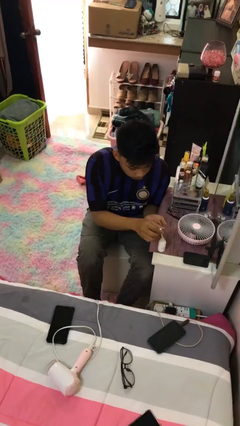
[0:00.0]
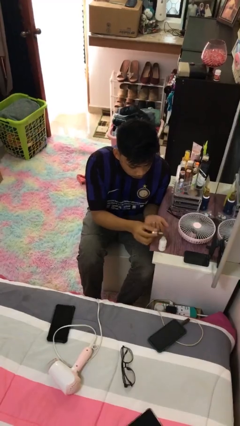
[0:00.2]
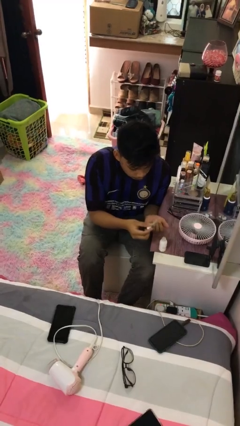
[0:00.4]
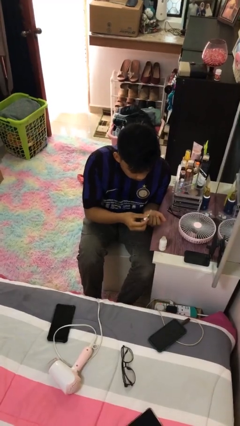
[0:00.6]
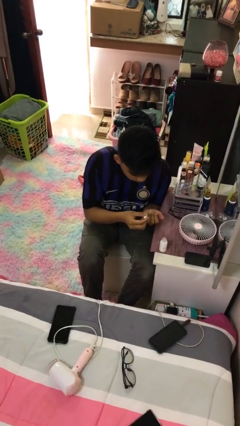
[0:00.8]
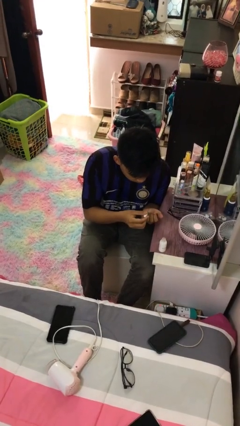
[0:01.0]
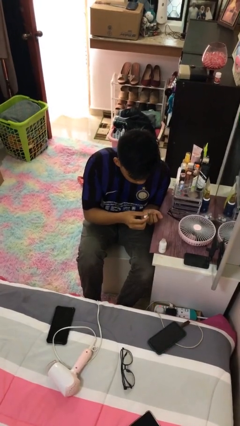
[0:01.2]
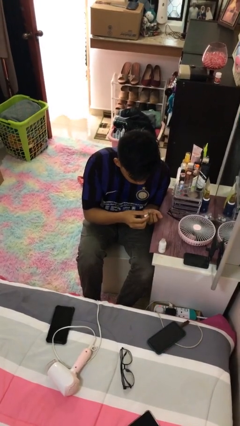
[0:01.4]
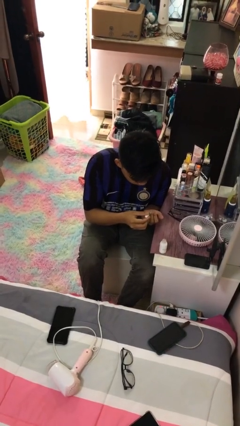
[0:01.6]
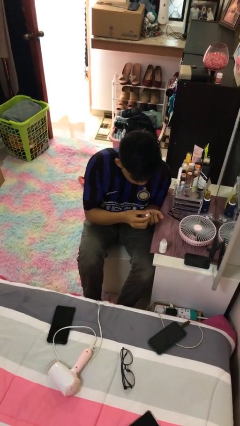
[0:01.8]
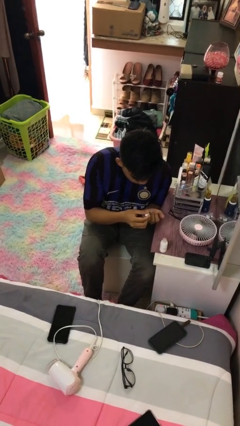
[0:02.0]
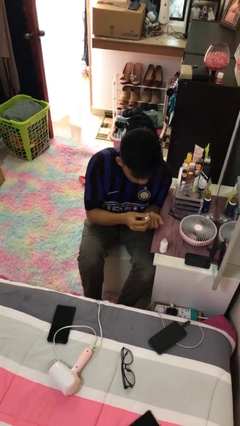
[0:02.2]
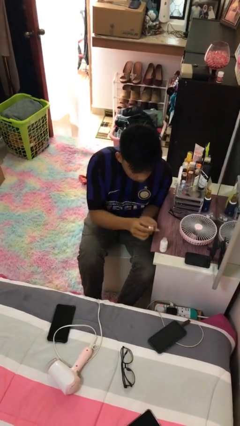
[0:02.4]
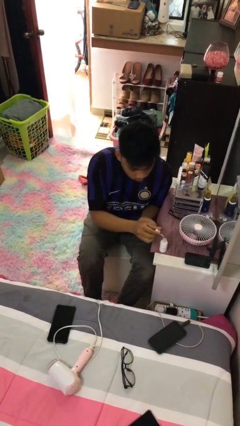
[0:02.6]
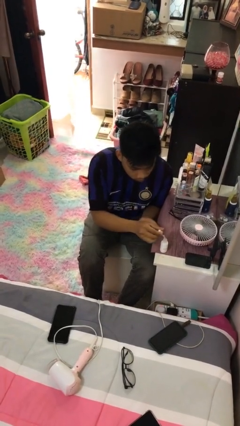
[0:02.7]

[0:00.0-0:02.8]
person paints fingernails

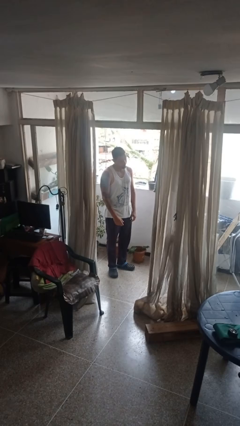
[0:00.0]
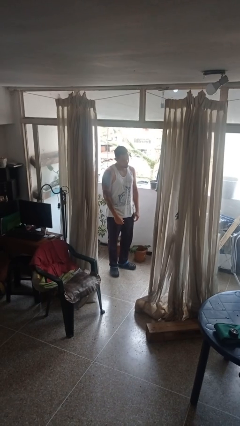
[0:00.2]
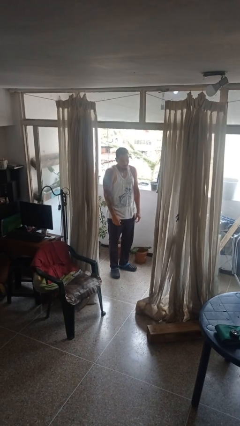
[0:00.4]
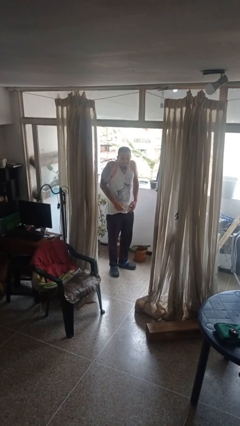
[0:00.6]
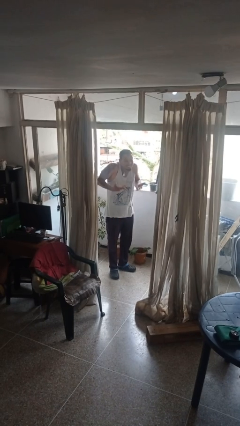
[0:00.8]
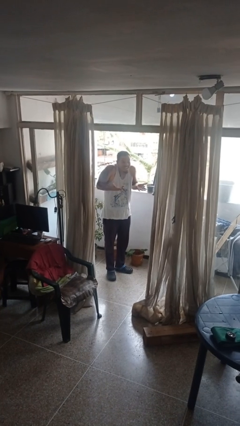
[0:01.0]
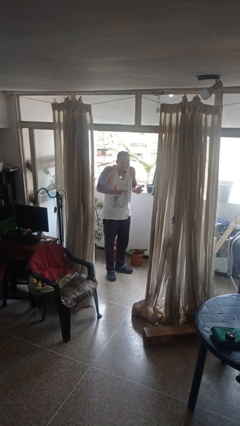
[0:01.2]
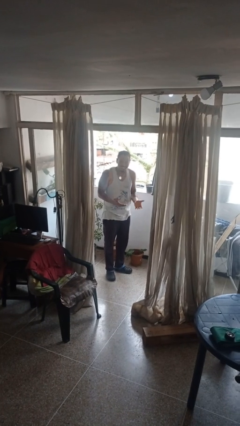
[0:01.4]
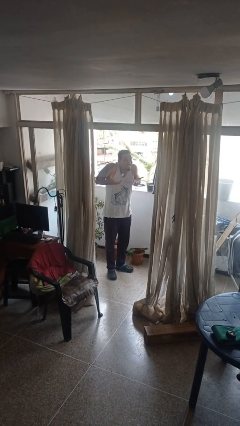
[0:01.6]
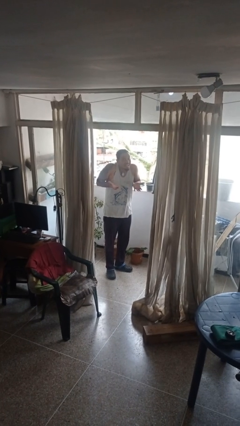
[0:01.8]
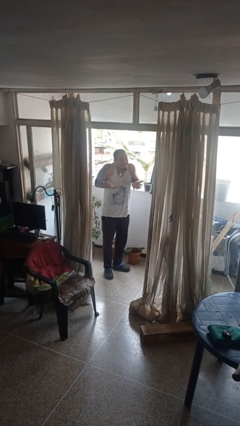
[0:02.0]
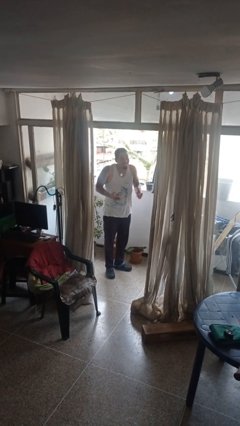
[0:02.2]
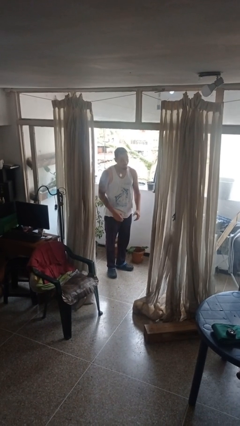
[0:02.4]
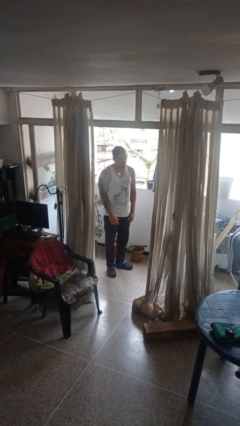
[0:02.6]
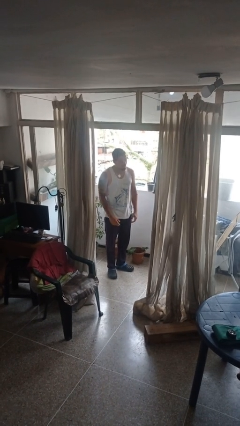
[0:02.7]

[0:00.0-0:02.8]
person shrugs

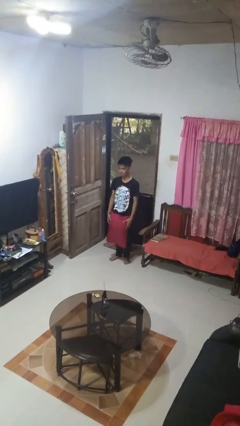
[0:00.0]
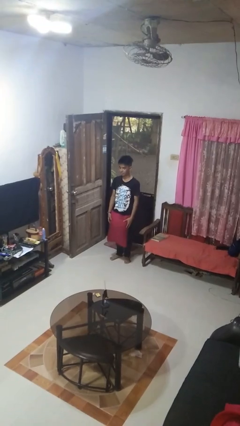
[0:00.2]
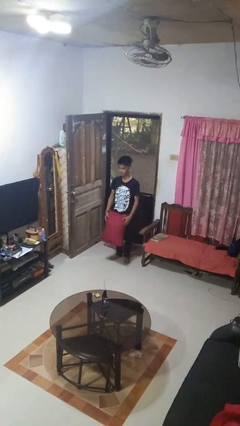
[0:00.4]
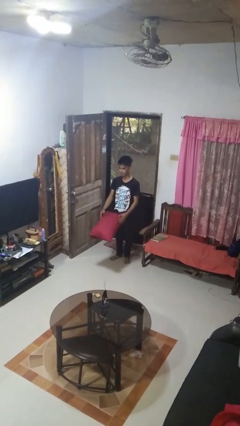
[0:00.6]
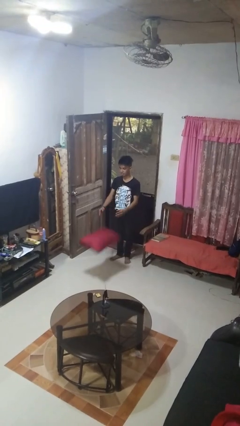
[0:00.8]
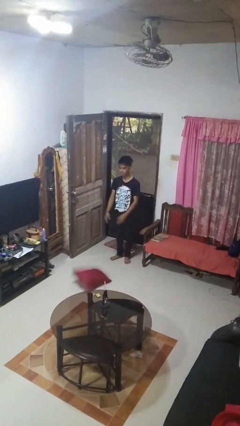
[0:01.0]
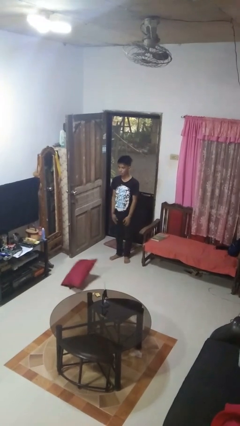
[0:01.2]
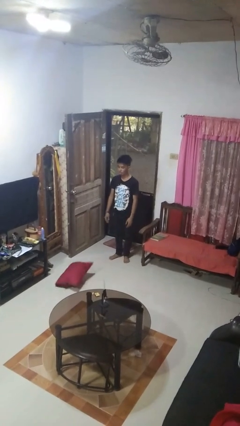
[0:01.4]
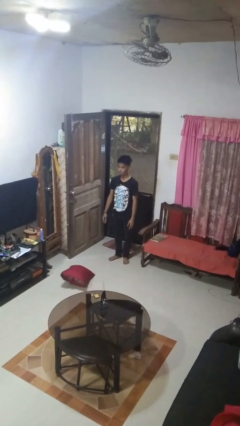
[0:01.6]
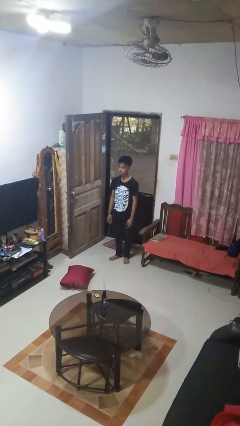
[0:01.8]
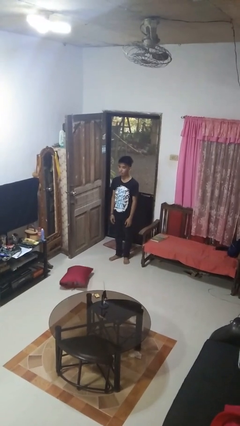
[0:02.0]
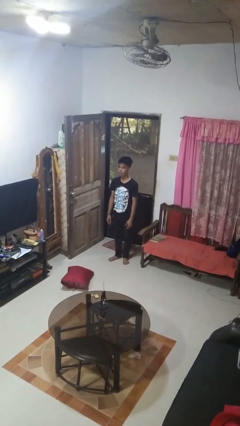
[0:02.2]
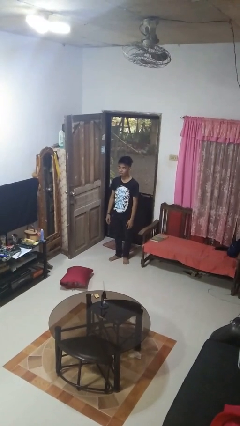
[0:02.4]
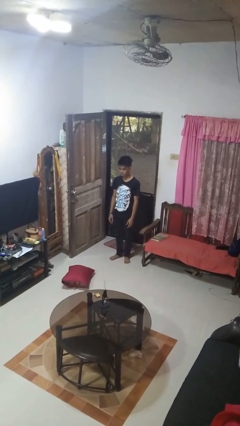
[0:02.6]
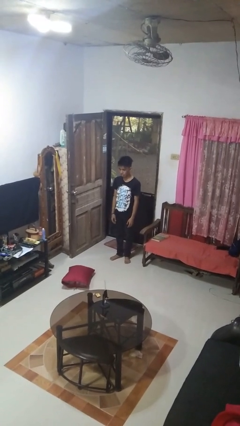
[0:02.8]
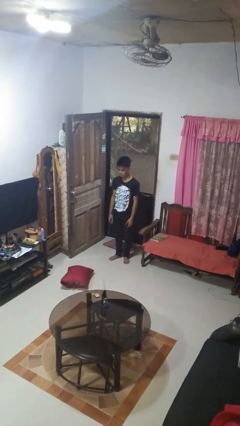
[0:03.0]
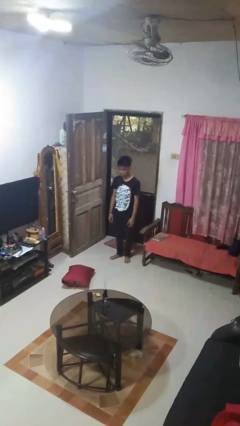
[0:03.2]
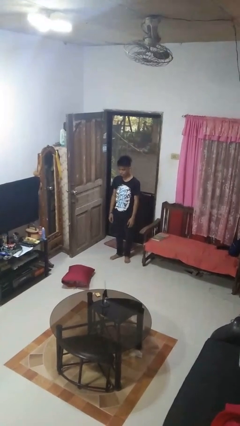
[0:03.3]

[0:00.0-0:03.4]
person throws object to ground

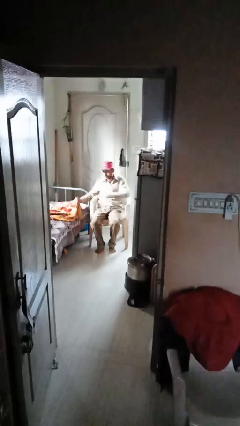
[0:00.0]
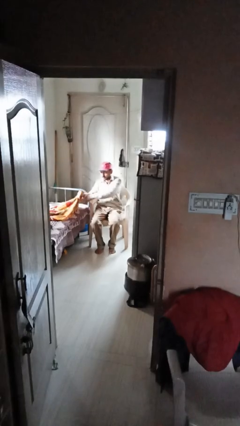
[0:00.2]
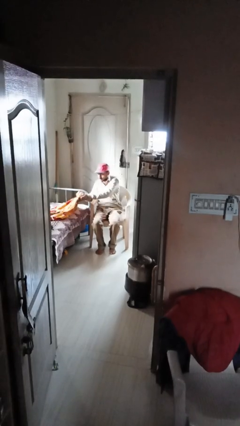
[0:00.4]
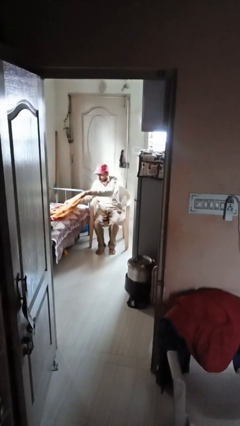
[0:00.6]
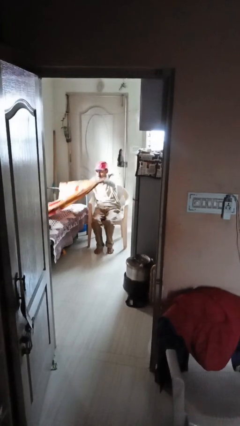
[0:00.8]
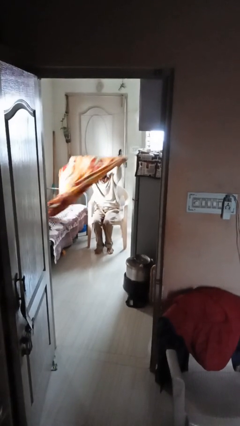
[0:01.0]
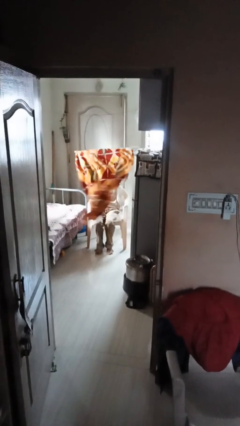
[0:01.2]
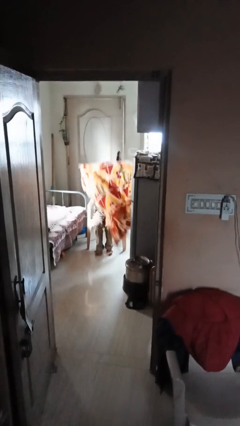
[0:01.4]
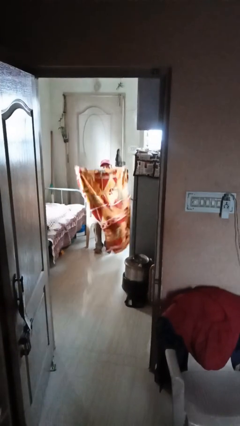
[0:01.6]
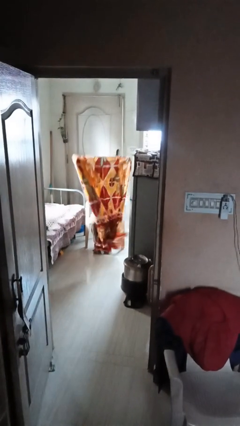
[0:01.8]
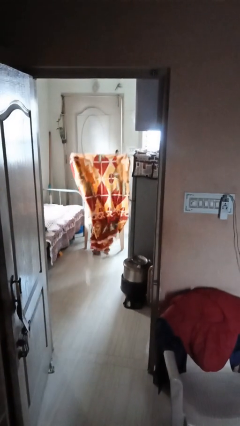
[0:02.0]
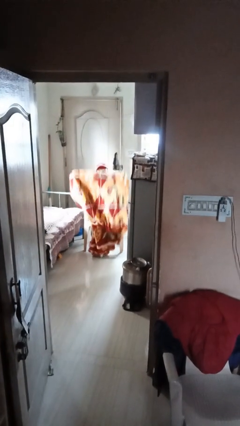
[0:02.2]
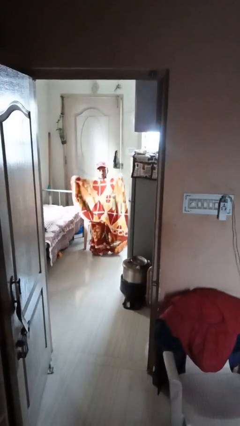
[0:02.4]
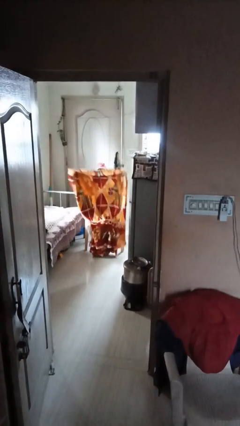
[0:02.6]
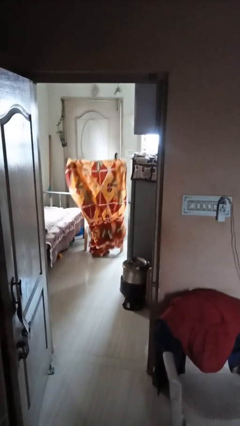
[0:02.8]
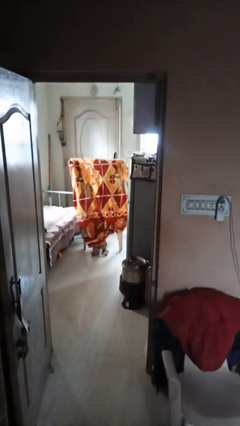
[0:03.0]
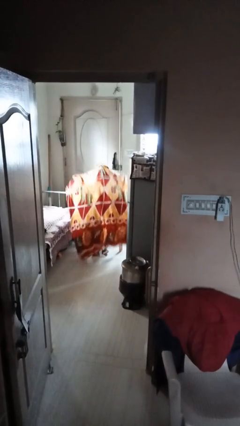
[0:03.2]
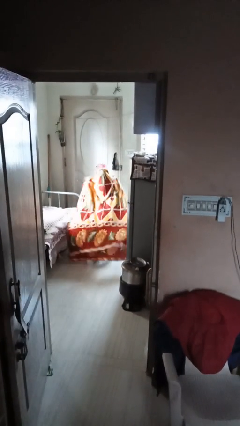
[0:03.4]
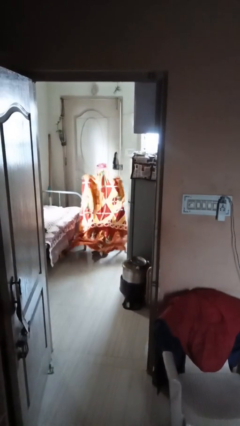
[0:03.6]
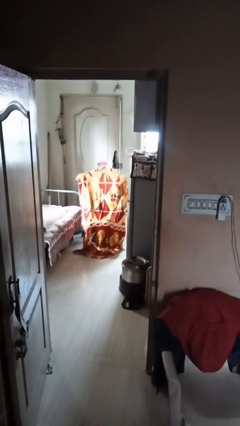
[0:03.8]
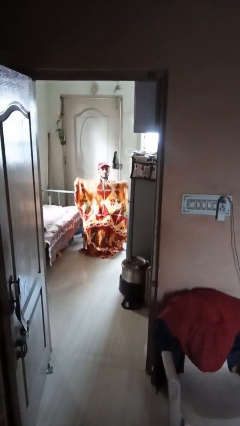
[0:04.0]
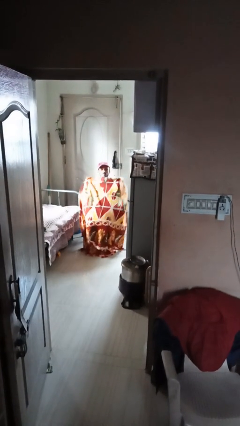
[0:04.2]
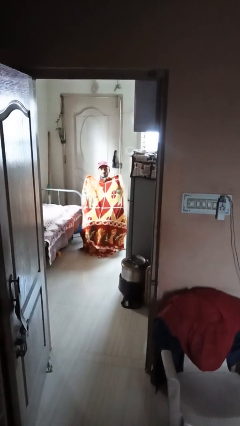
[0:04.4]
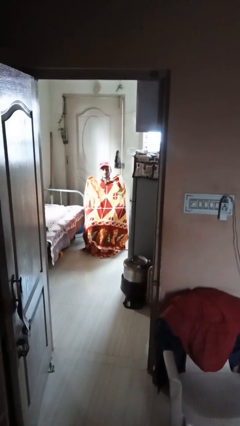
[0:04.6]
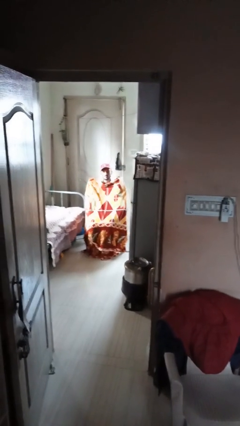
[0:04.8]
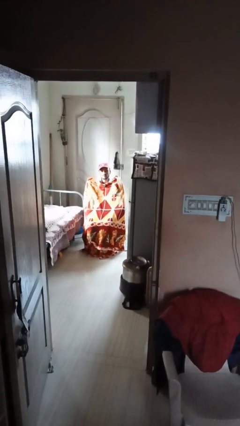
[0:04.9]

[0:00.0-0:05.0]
person covers with blanket

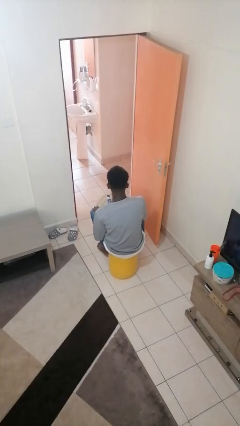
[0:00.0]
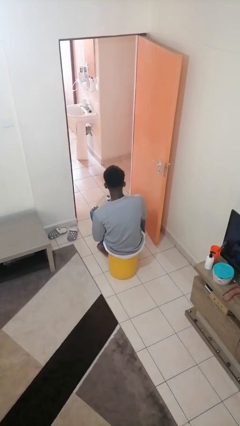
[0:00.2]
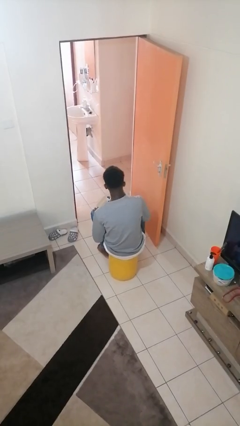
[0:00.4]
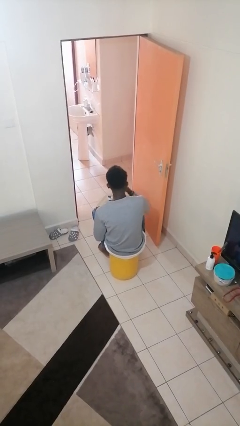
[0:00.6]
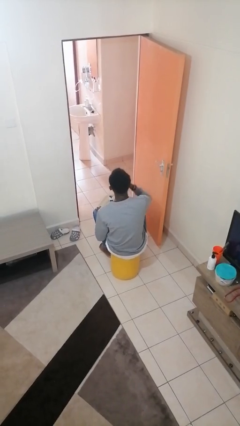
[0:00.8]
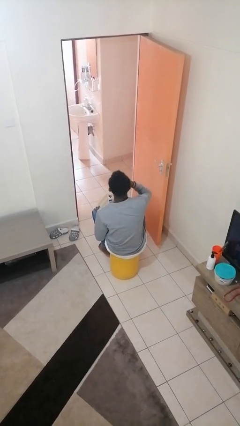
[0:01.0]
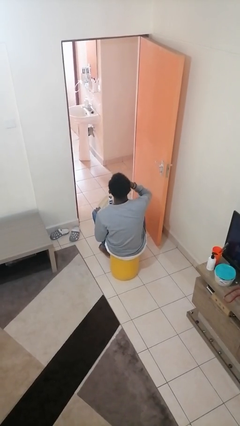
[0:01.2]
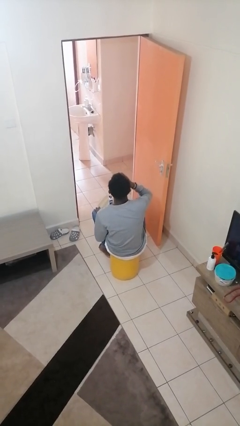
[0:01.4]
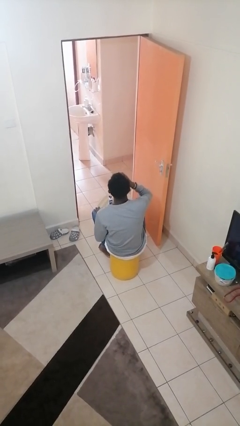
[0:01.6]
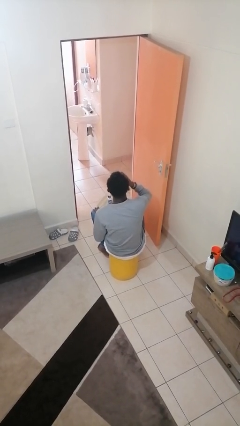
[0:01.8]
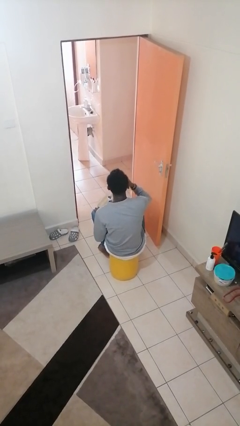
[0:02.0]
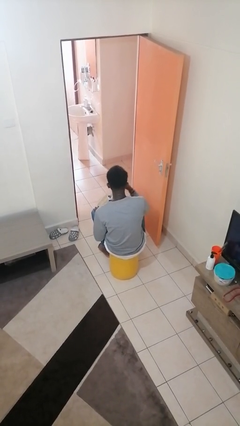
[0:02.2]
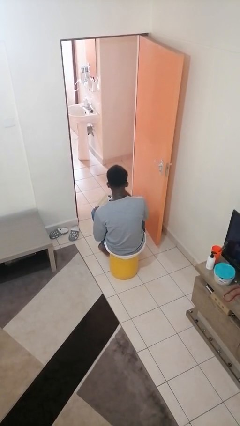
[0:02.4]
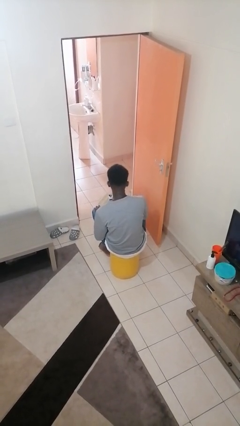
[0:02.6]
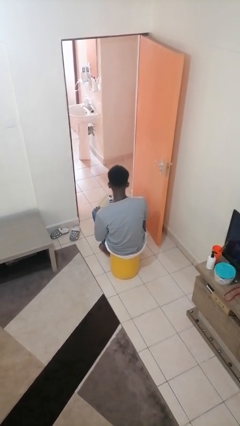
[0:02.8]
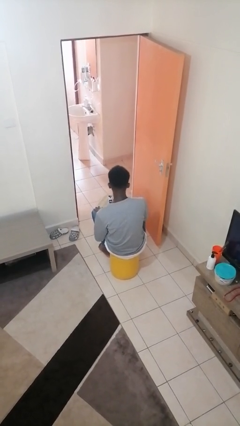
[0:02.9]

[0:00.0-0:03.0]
person drinks from cup

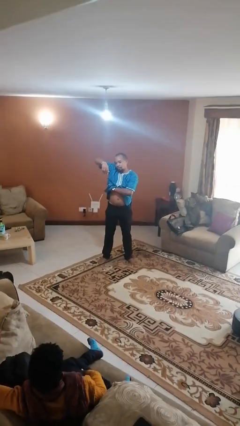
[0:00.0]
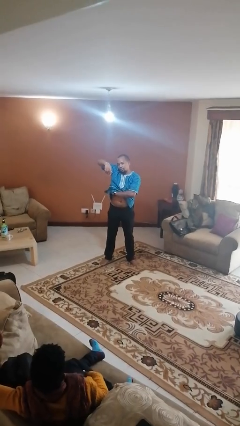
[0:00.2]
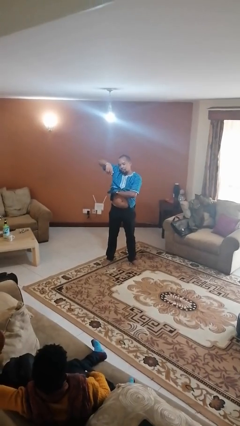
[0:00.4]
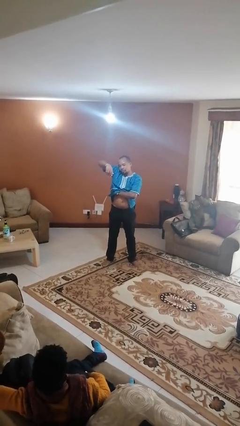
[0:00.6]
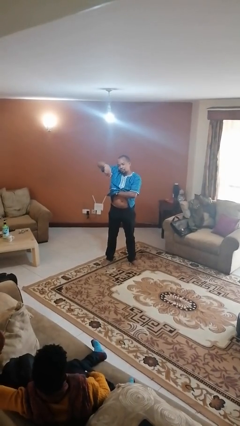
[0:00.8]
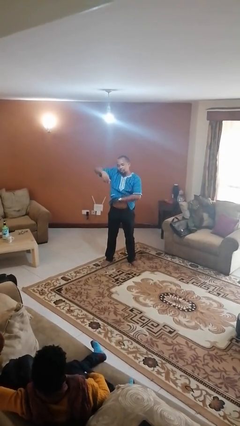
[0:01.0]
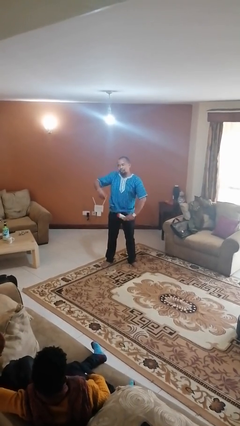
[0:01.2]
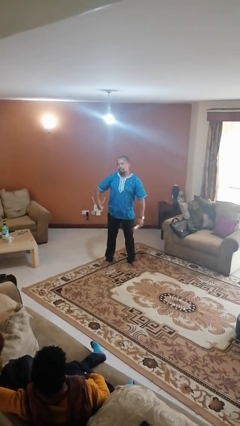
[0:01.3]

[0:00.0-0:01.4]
person applies deodorant
